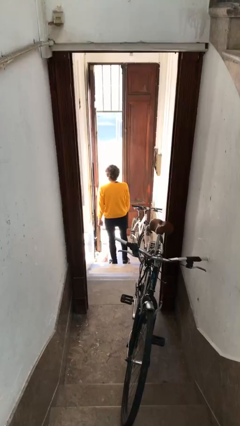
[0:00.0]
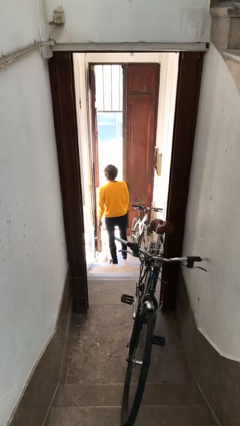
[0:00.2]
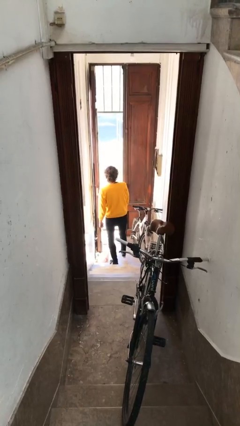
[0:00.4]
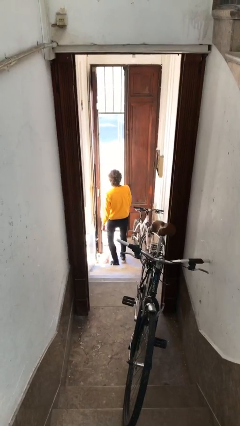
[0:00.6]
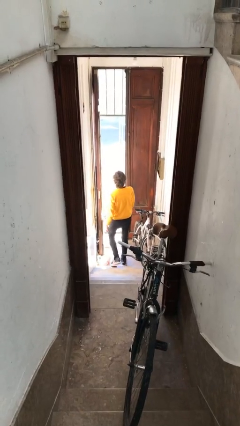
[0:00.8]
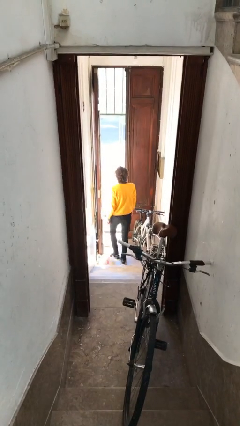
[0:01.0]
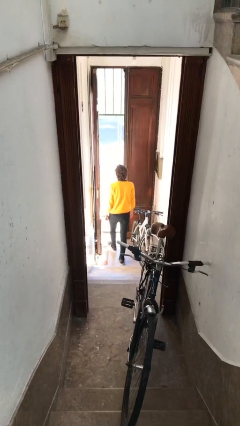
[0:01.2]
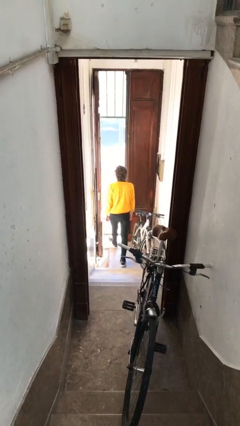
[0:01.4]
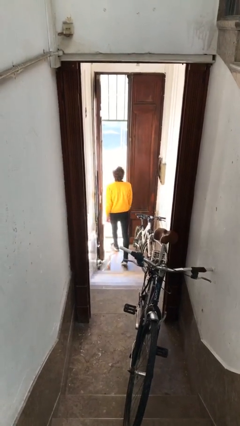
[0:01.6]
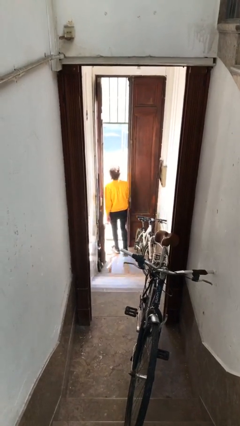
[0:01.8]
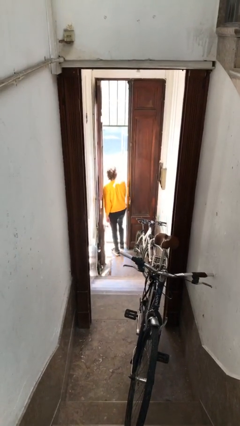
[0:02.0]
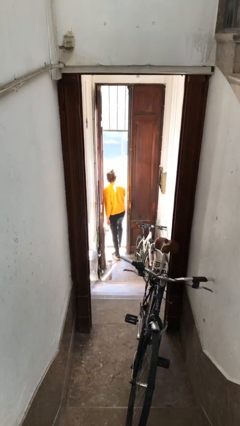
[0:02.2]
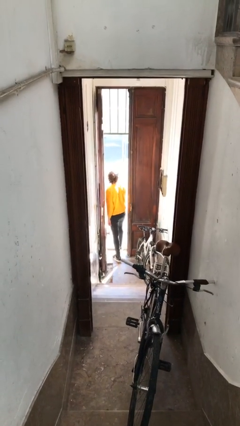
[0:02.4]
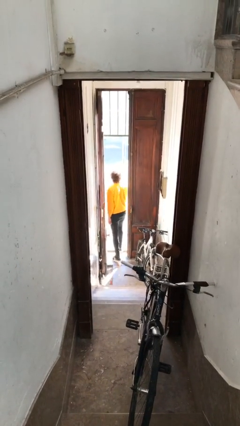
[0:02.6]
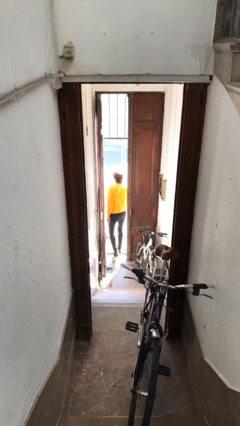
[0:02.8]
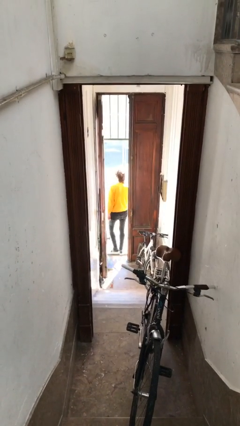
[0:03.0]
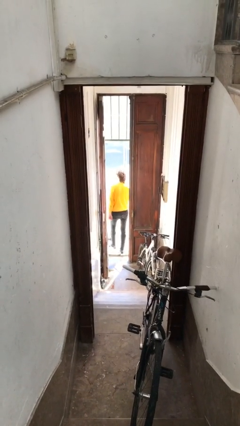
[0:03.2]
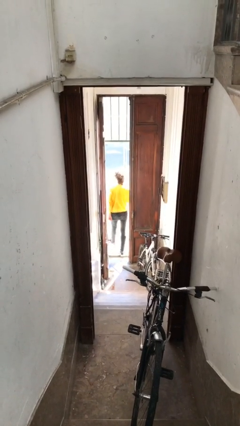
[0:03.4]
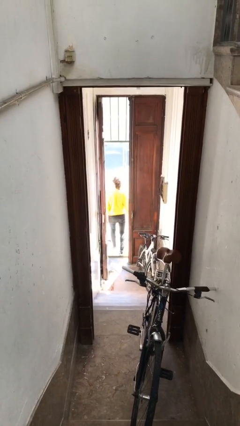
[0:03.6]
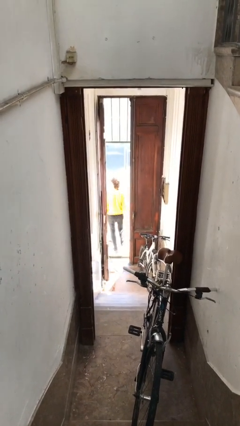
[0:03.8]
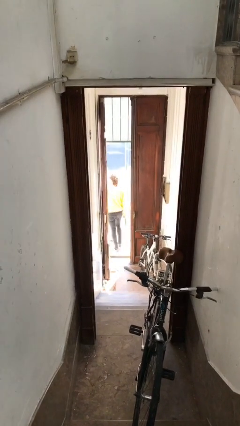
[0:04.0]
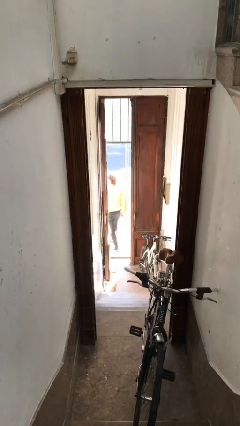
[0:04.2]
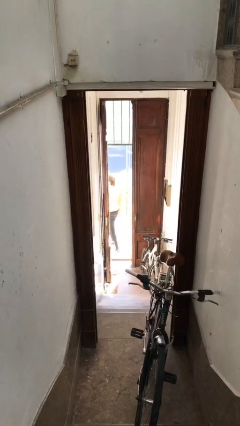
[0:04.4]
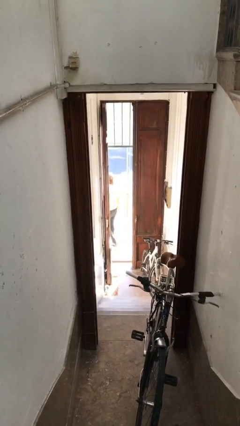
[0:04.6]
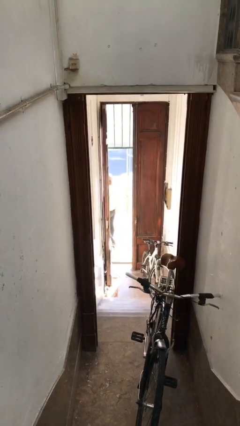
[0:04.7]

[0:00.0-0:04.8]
person exits scene through structure

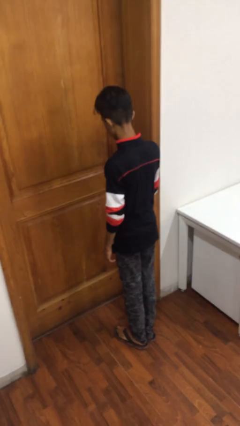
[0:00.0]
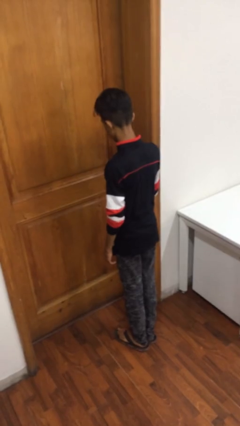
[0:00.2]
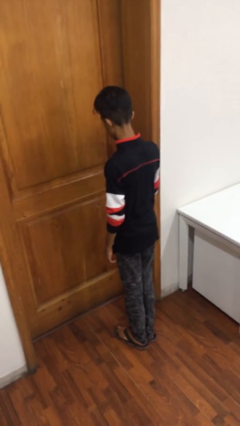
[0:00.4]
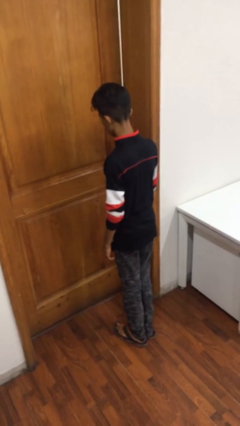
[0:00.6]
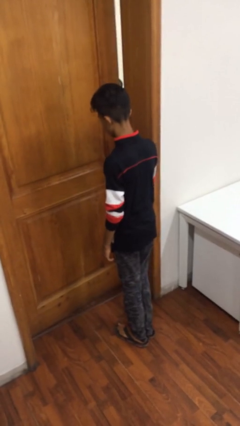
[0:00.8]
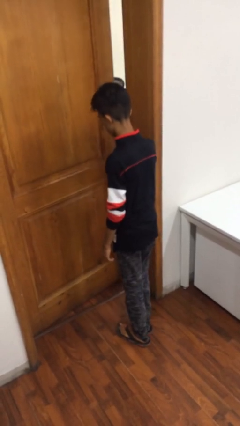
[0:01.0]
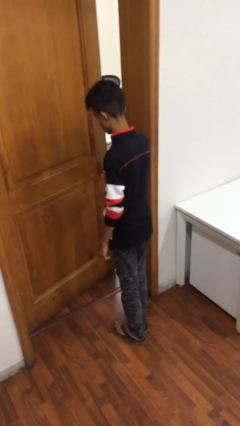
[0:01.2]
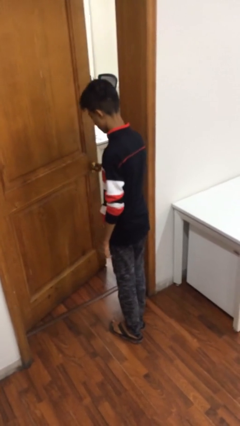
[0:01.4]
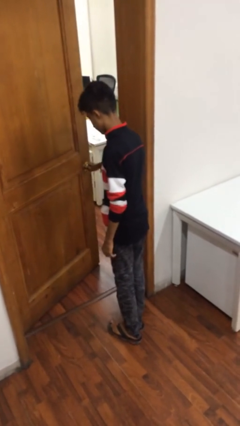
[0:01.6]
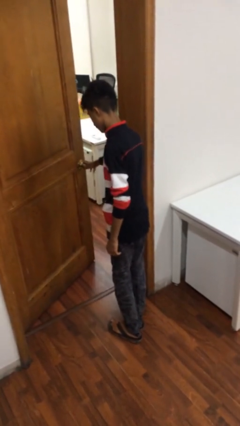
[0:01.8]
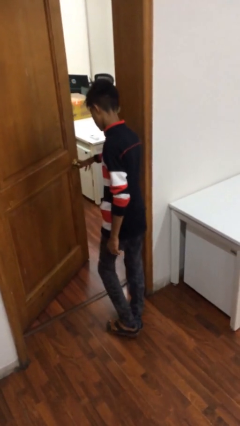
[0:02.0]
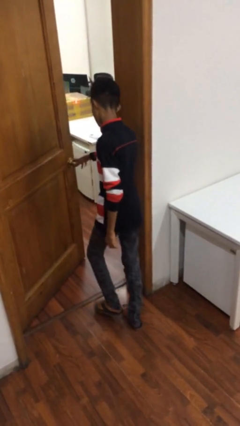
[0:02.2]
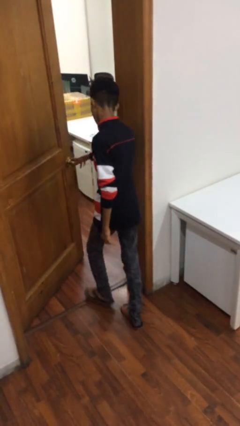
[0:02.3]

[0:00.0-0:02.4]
person opens facility door

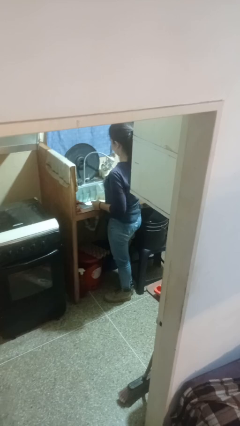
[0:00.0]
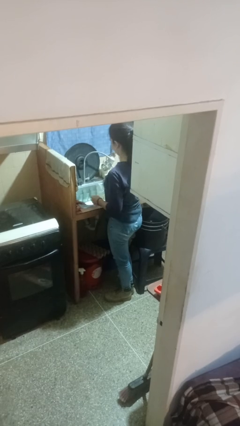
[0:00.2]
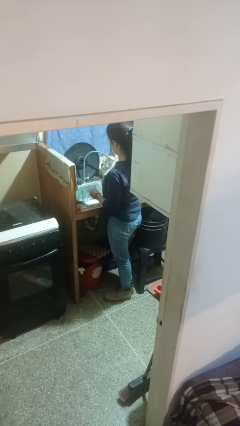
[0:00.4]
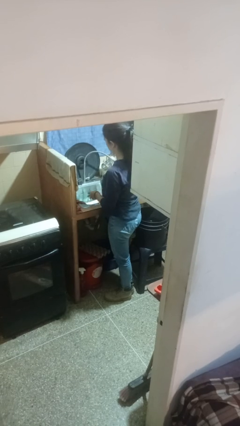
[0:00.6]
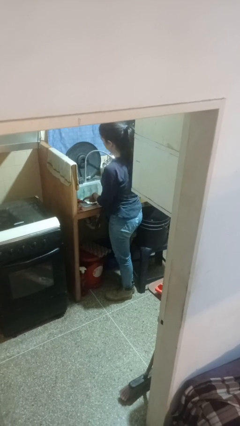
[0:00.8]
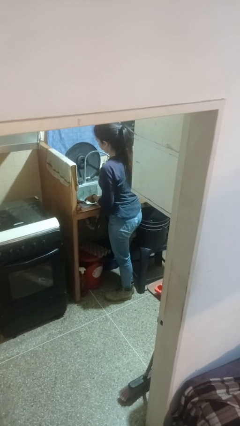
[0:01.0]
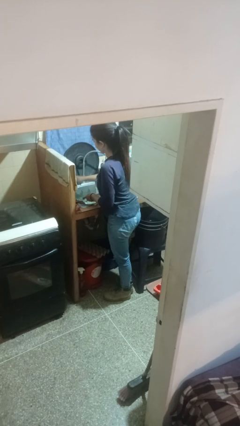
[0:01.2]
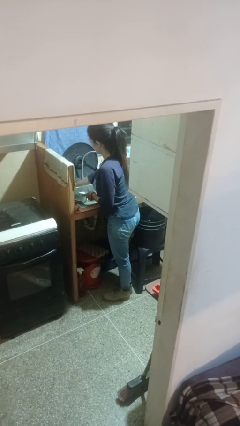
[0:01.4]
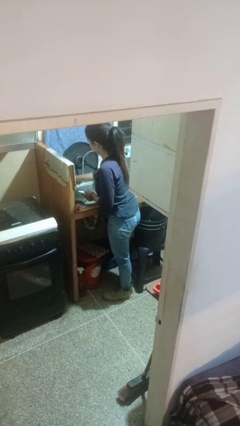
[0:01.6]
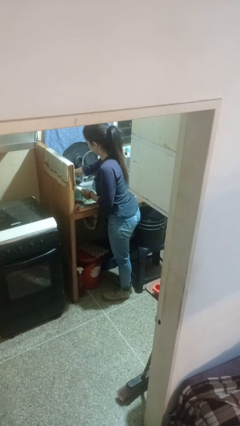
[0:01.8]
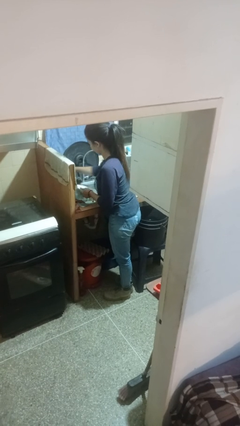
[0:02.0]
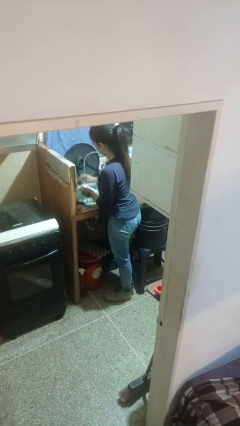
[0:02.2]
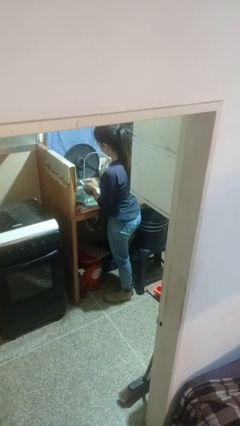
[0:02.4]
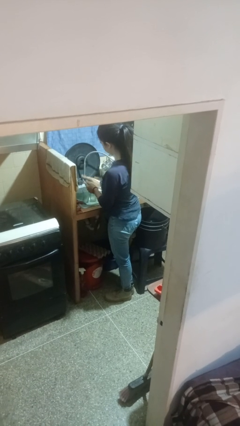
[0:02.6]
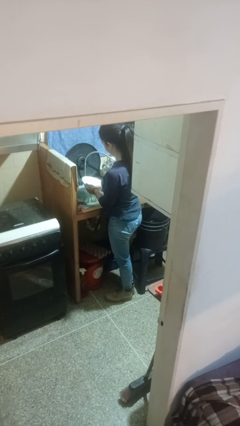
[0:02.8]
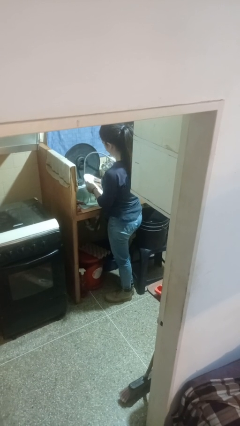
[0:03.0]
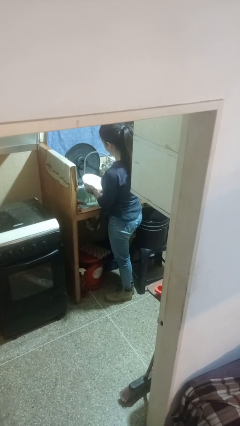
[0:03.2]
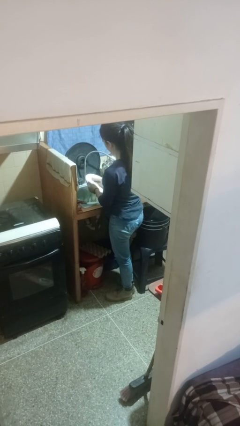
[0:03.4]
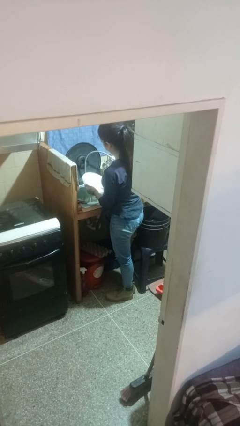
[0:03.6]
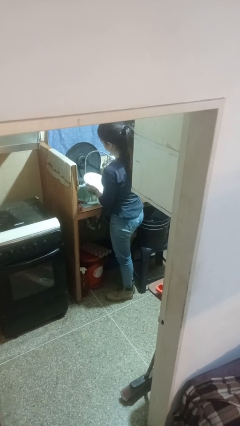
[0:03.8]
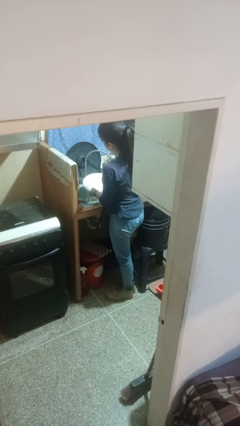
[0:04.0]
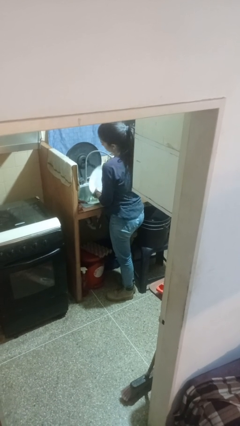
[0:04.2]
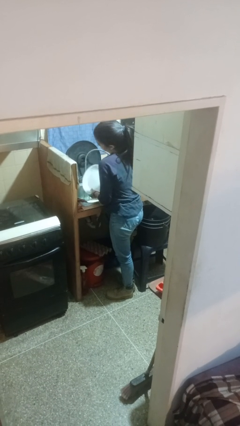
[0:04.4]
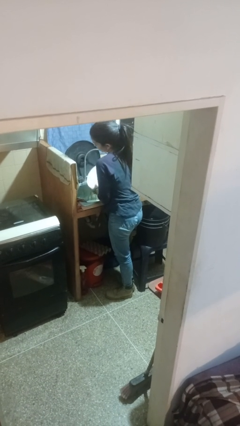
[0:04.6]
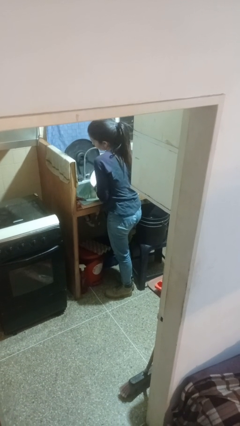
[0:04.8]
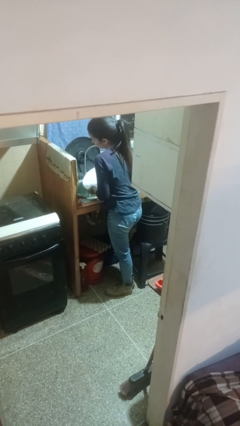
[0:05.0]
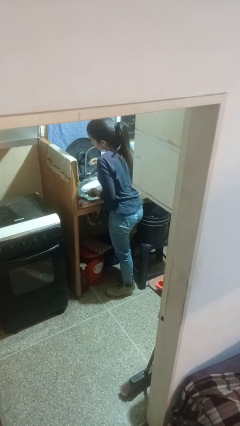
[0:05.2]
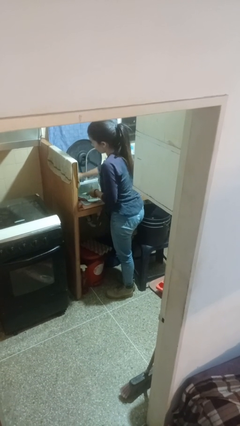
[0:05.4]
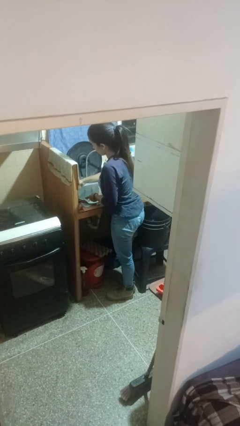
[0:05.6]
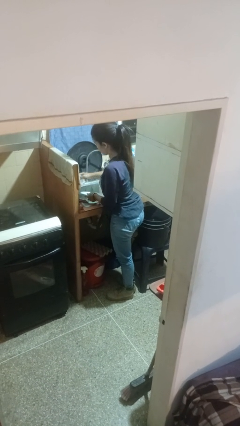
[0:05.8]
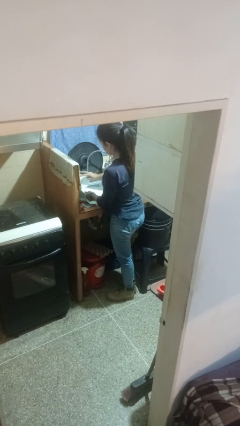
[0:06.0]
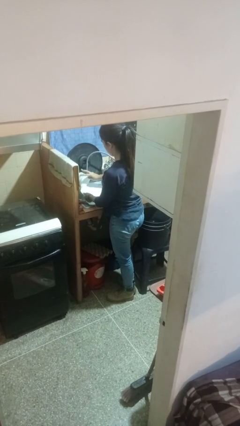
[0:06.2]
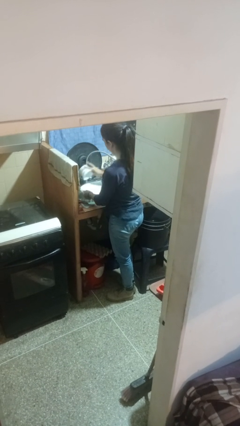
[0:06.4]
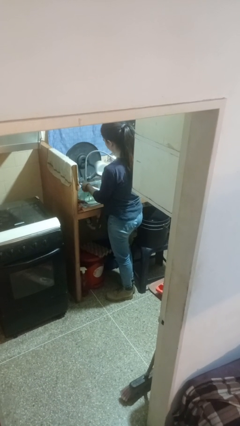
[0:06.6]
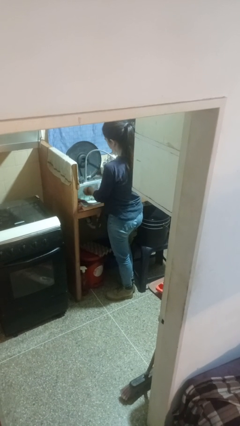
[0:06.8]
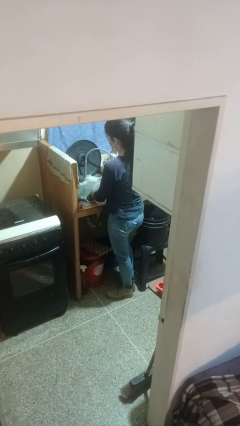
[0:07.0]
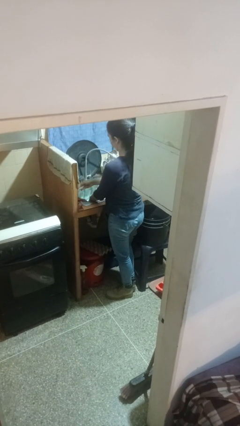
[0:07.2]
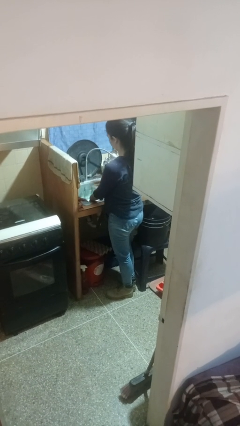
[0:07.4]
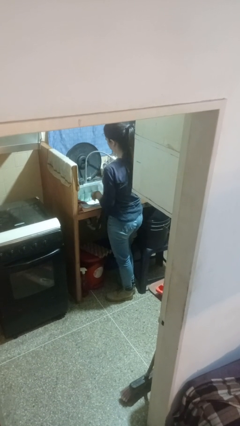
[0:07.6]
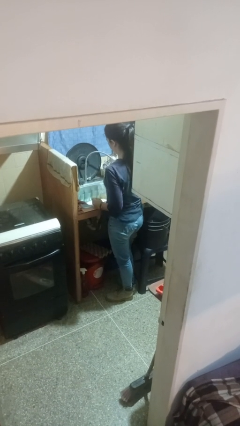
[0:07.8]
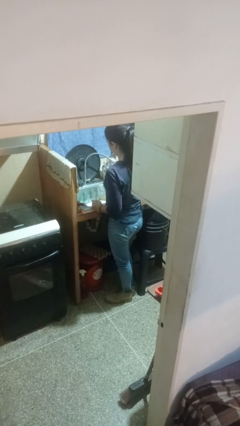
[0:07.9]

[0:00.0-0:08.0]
person washes dish

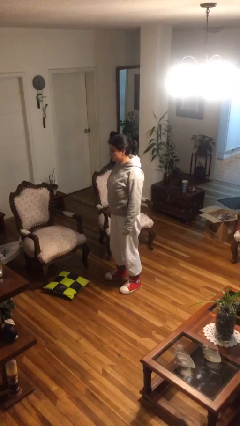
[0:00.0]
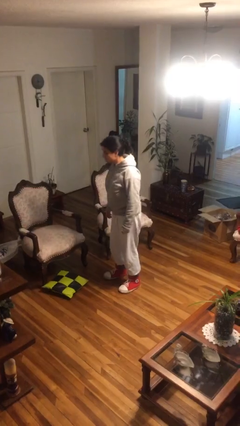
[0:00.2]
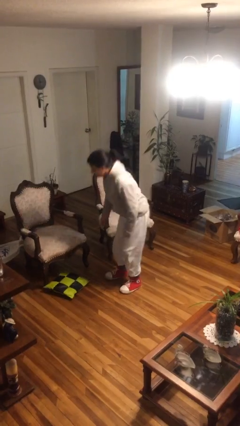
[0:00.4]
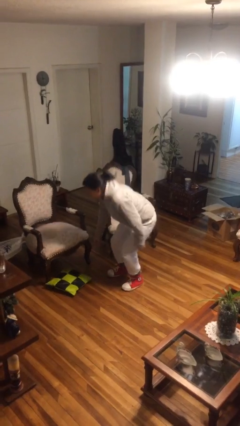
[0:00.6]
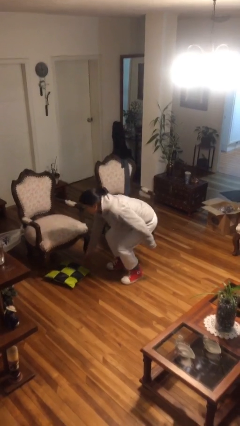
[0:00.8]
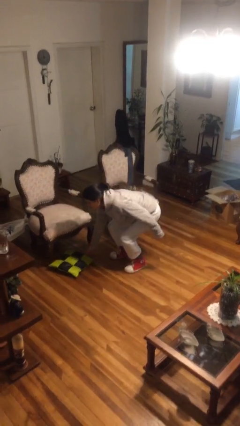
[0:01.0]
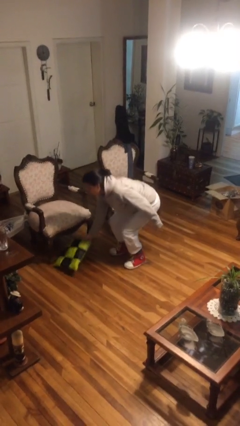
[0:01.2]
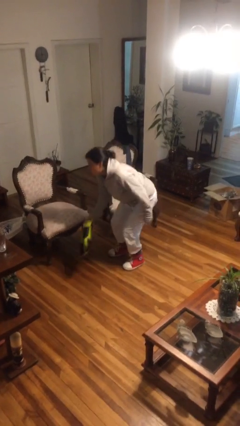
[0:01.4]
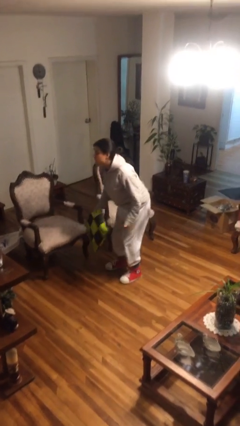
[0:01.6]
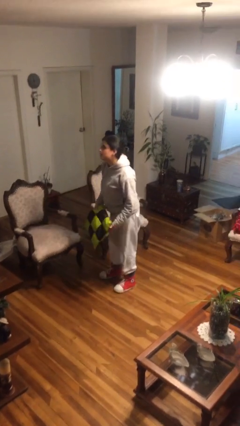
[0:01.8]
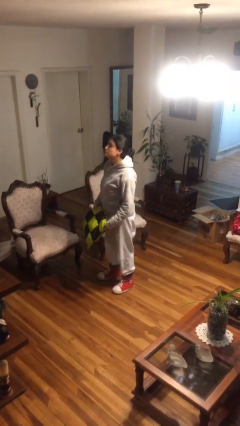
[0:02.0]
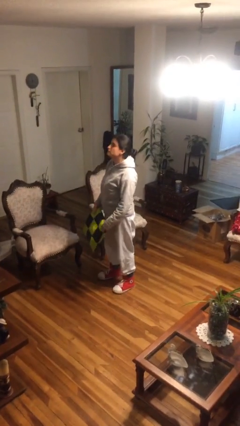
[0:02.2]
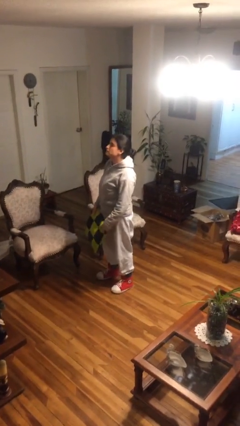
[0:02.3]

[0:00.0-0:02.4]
person picks up object from floor

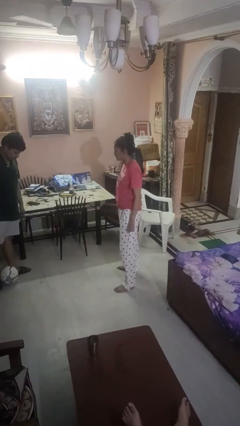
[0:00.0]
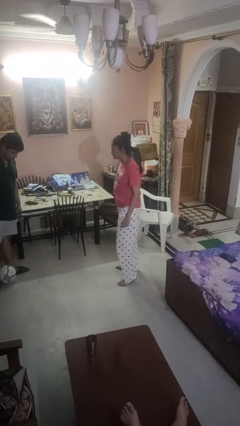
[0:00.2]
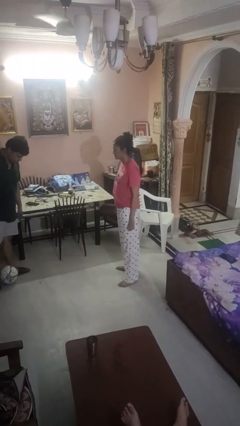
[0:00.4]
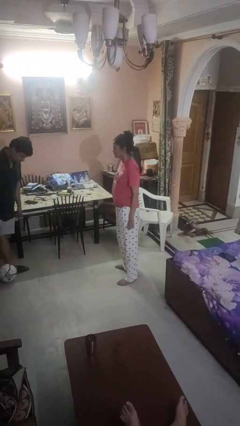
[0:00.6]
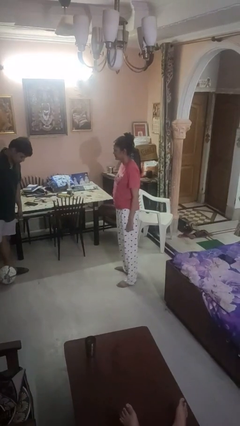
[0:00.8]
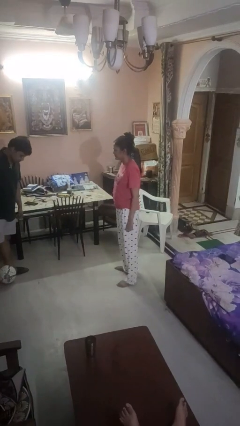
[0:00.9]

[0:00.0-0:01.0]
person kicks object to person
